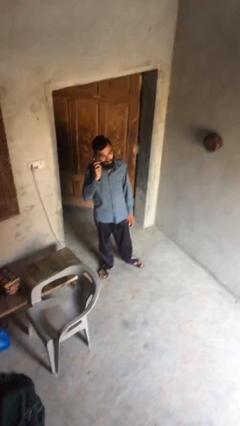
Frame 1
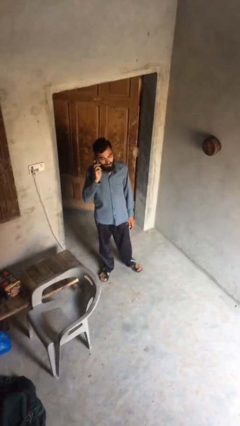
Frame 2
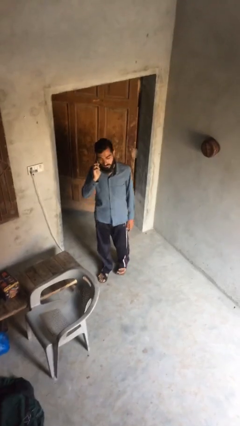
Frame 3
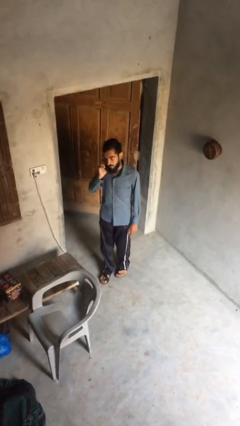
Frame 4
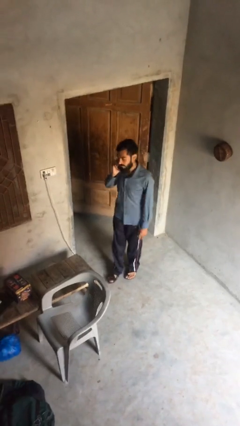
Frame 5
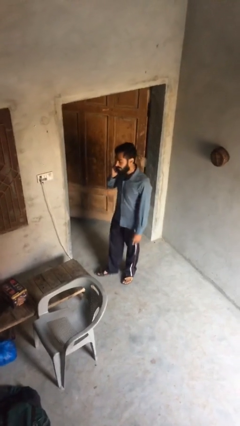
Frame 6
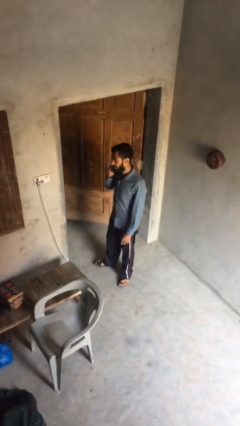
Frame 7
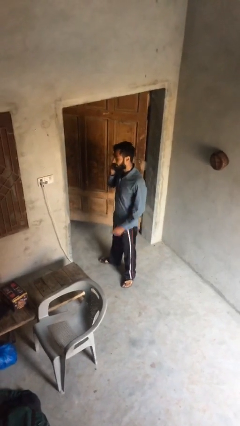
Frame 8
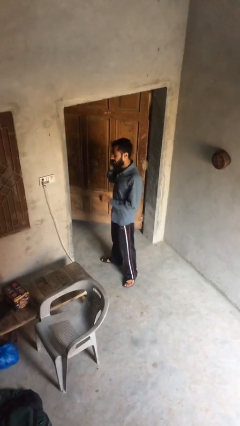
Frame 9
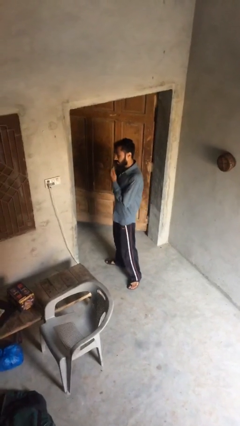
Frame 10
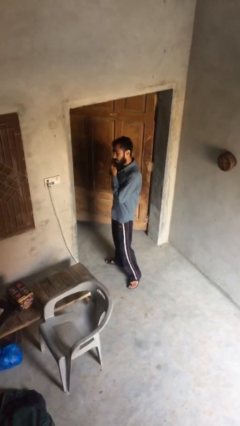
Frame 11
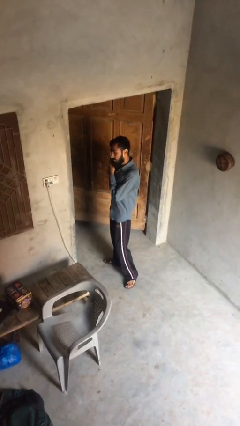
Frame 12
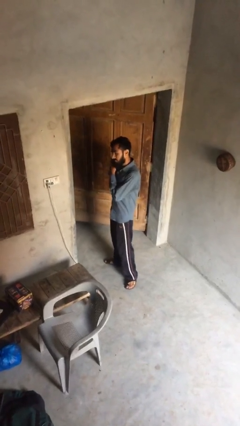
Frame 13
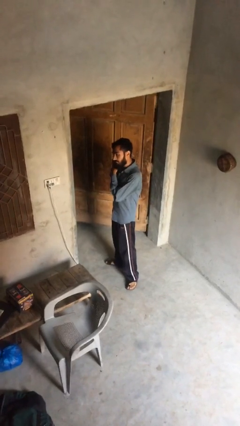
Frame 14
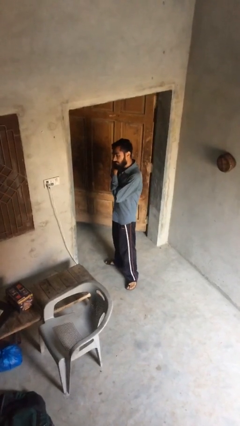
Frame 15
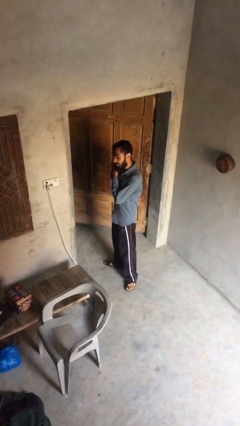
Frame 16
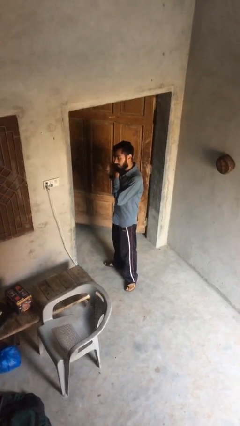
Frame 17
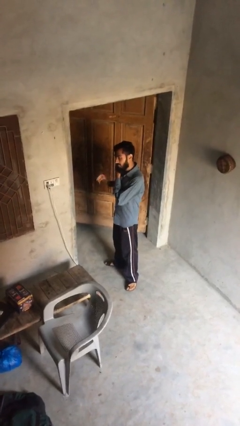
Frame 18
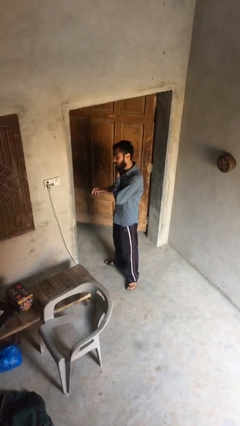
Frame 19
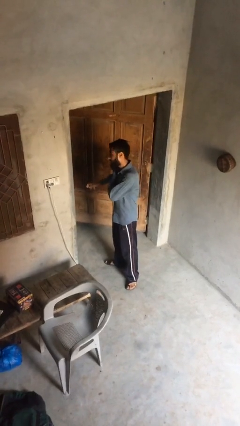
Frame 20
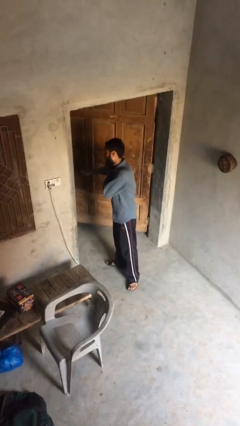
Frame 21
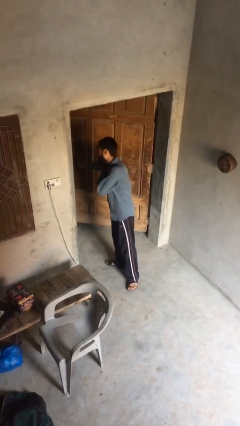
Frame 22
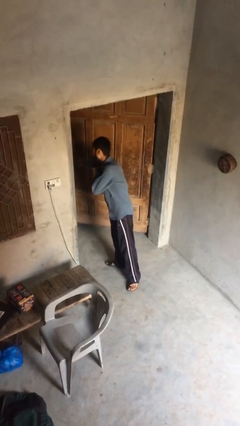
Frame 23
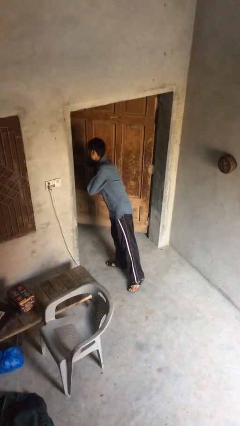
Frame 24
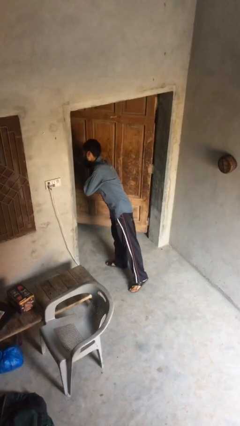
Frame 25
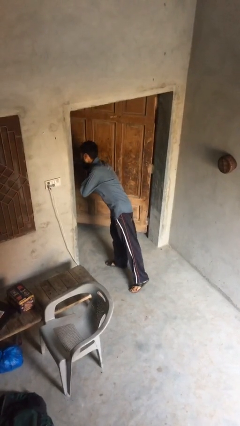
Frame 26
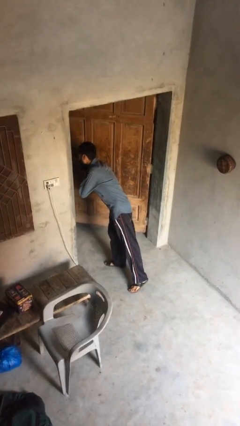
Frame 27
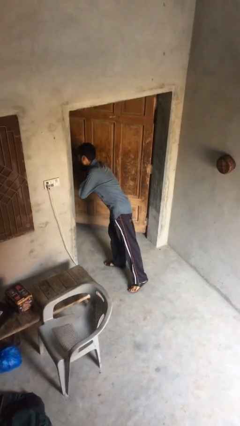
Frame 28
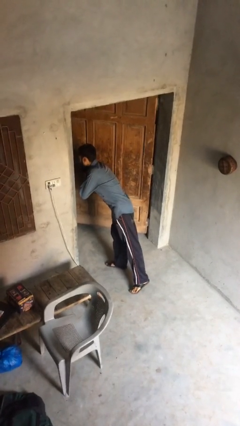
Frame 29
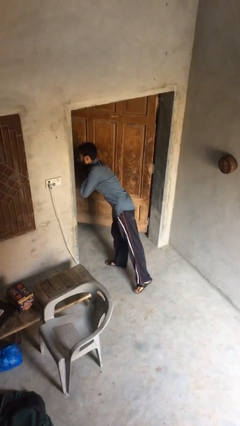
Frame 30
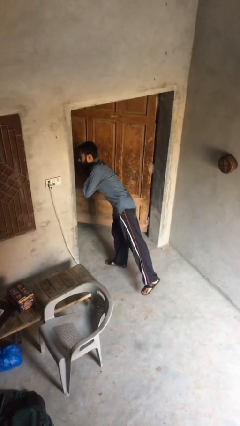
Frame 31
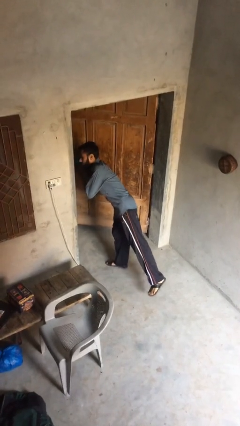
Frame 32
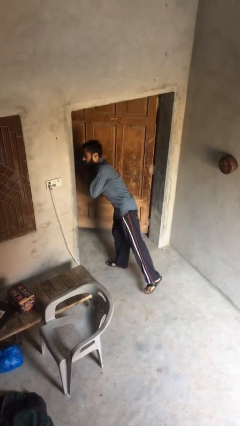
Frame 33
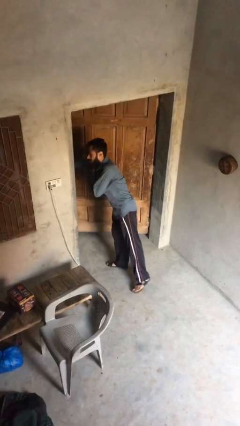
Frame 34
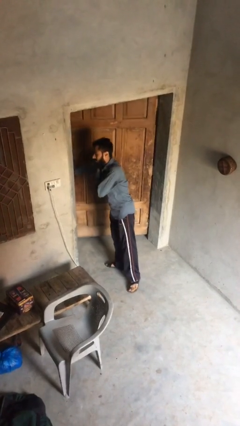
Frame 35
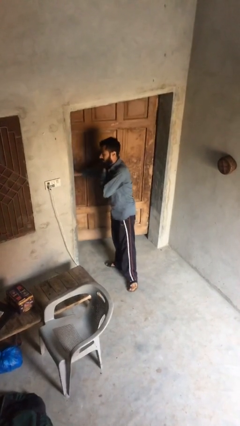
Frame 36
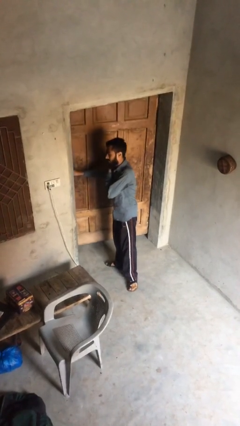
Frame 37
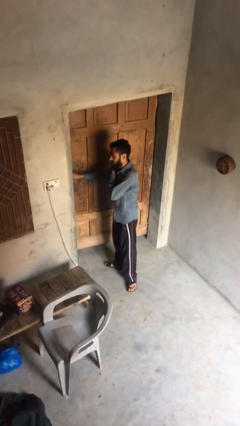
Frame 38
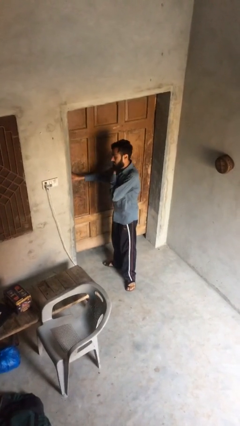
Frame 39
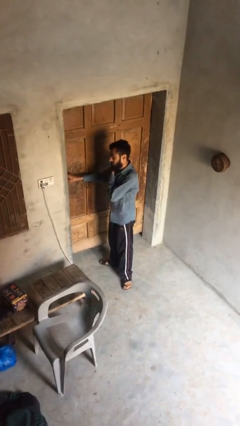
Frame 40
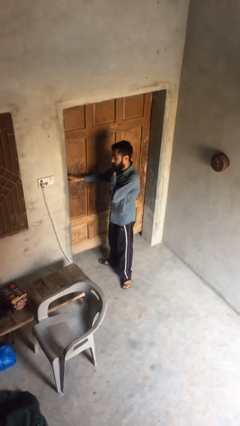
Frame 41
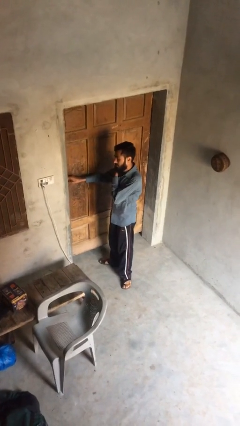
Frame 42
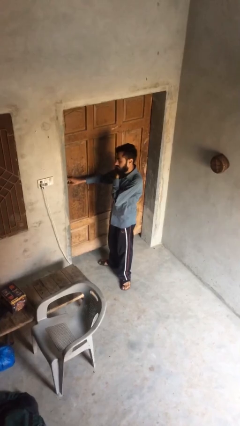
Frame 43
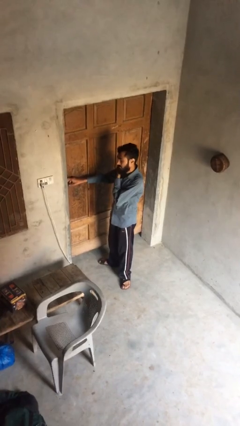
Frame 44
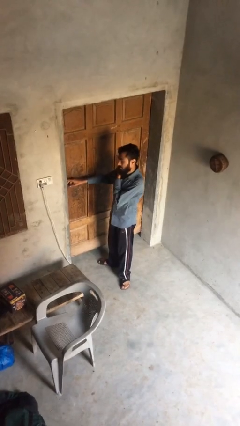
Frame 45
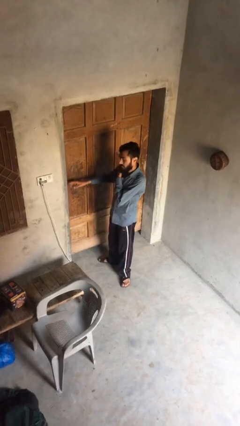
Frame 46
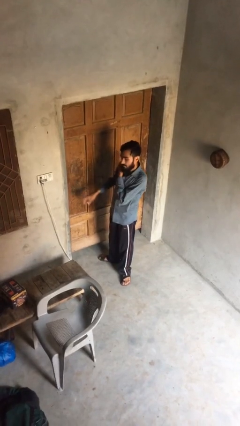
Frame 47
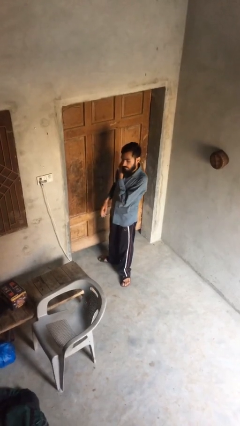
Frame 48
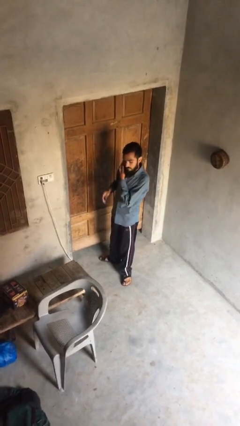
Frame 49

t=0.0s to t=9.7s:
person closes facility door

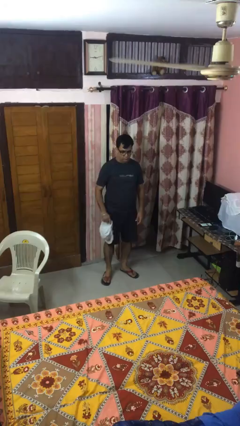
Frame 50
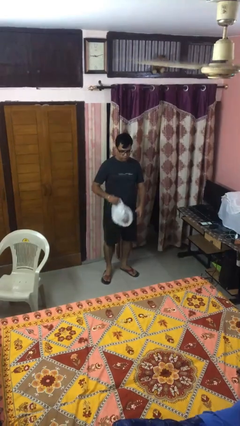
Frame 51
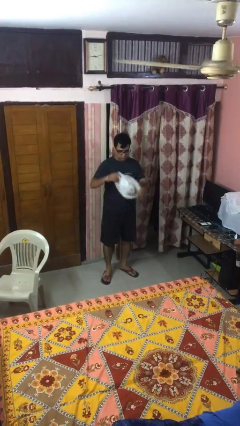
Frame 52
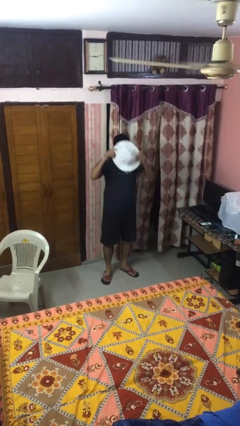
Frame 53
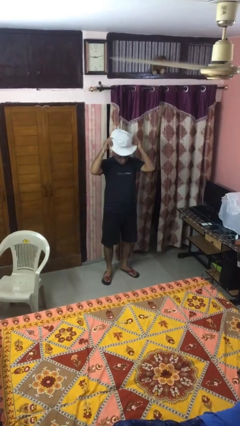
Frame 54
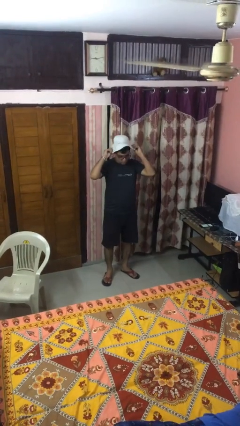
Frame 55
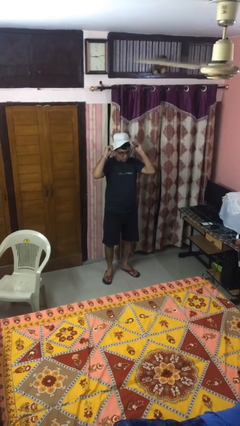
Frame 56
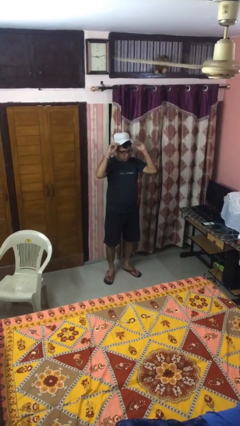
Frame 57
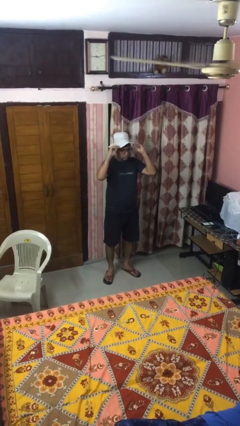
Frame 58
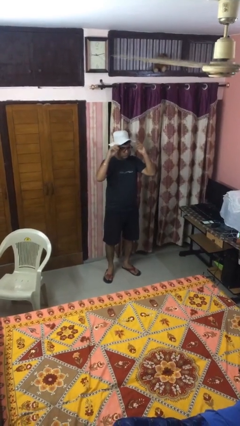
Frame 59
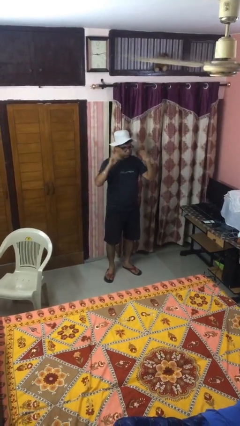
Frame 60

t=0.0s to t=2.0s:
person puts on hat

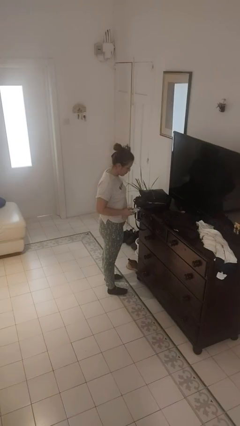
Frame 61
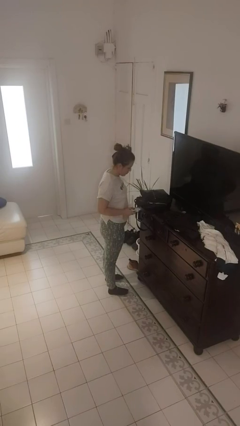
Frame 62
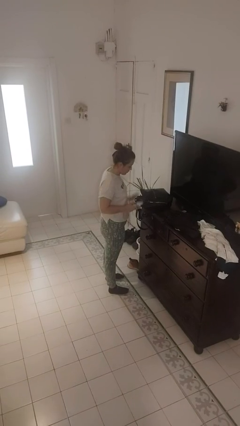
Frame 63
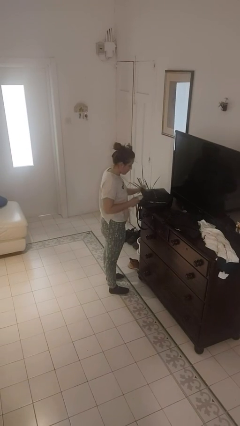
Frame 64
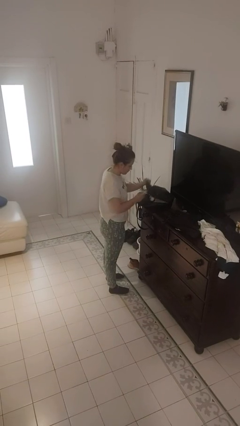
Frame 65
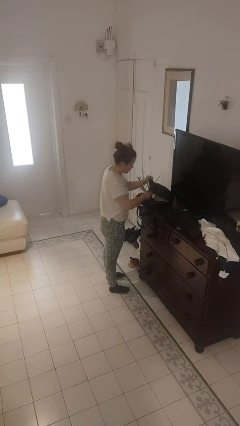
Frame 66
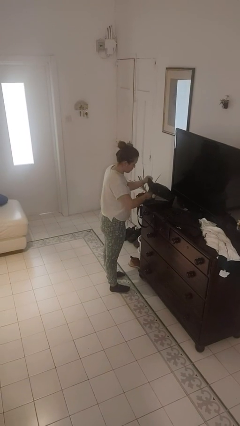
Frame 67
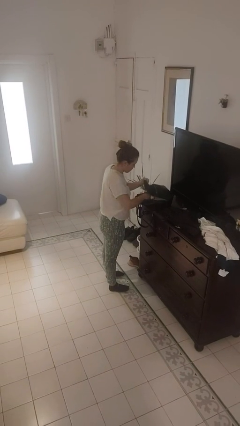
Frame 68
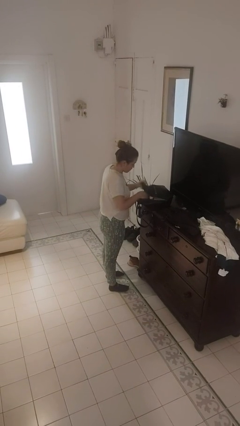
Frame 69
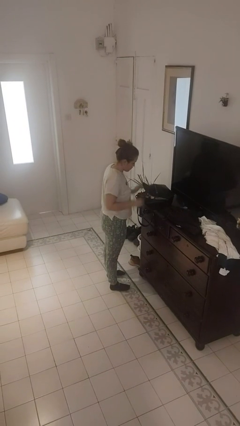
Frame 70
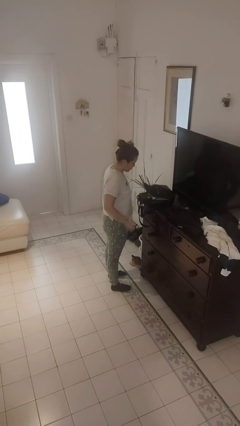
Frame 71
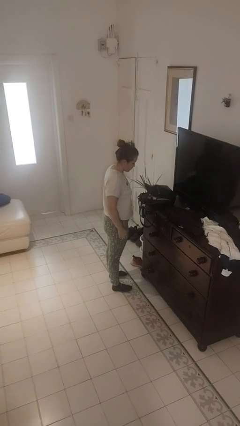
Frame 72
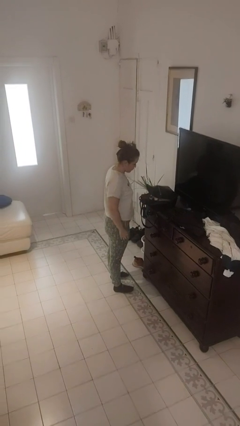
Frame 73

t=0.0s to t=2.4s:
person puts object into purse

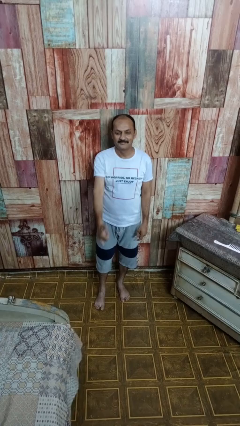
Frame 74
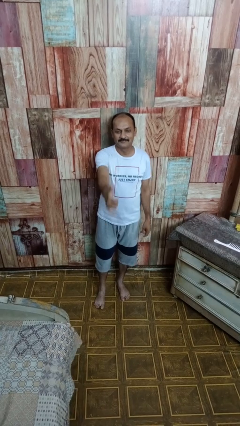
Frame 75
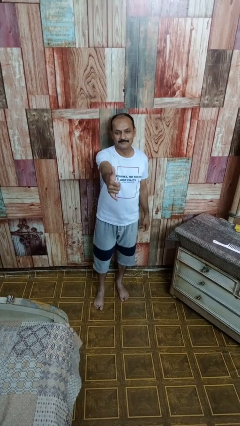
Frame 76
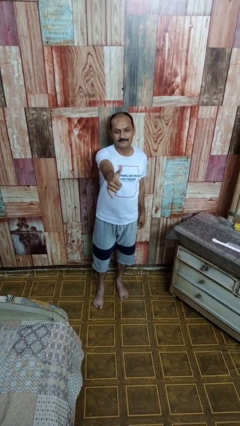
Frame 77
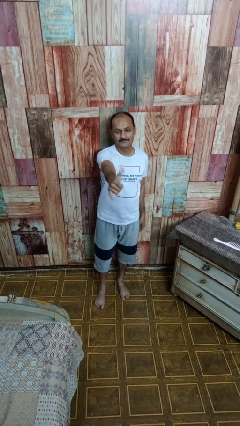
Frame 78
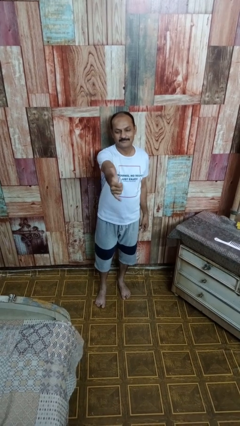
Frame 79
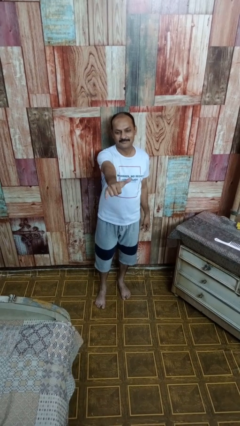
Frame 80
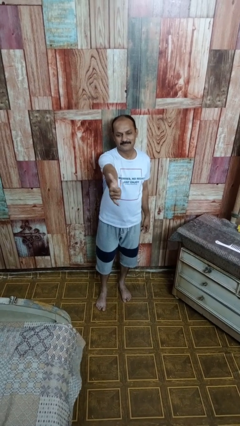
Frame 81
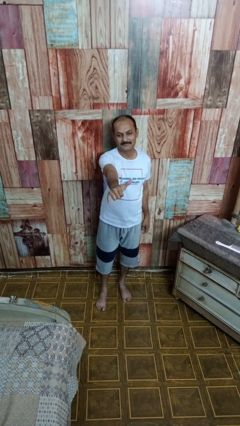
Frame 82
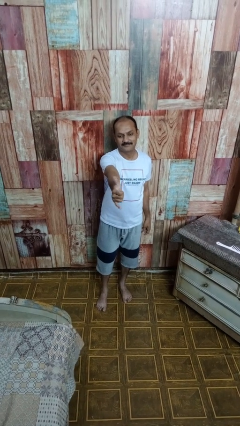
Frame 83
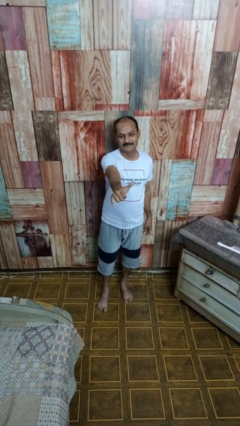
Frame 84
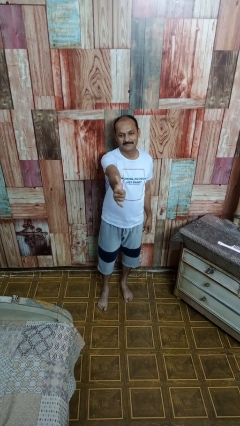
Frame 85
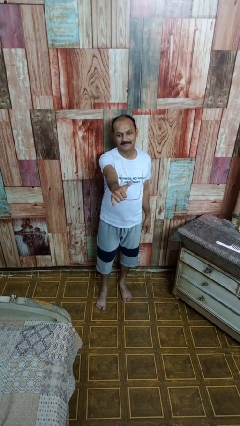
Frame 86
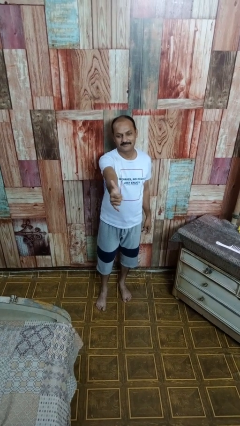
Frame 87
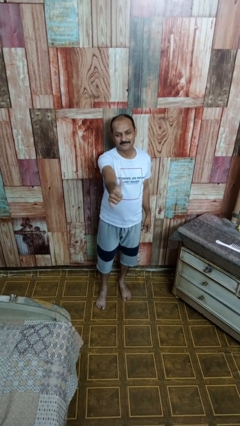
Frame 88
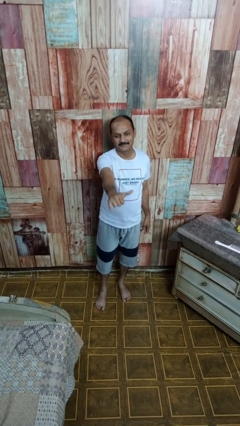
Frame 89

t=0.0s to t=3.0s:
person gestures hang loose

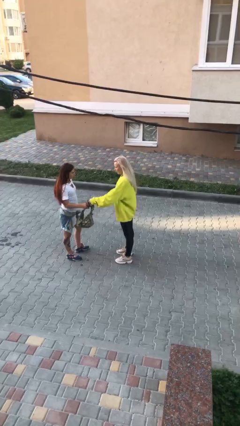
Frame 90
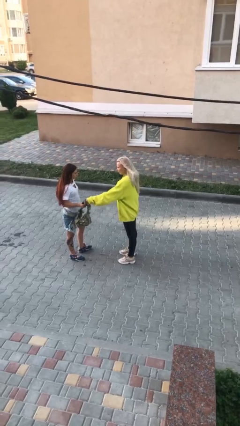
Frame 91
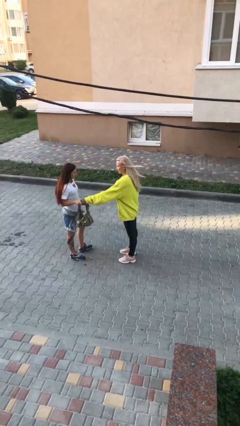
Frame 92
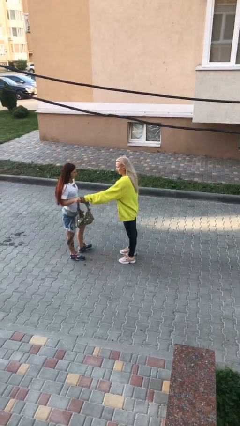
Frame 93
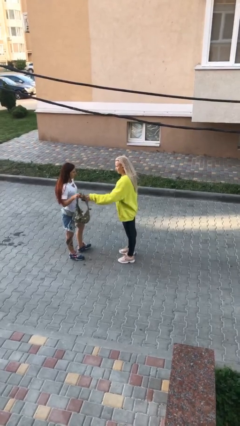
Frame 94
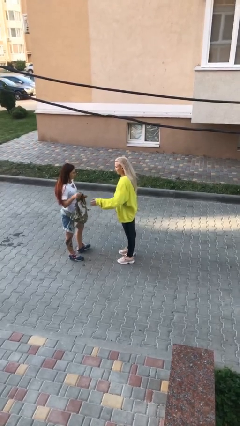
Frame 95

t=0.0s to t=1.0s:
person transfers object to person
